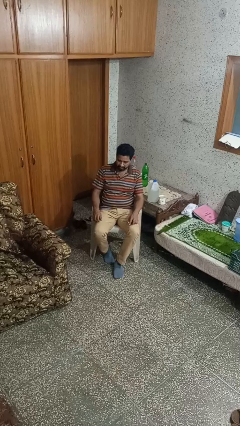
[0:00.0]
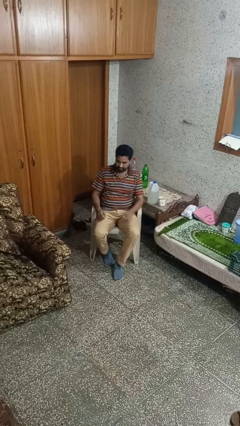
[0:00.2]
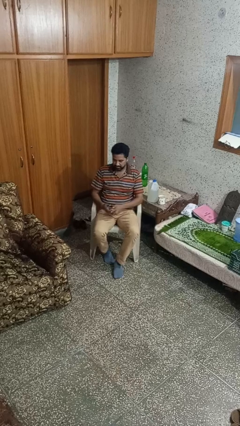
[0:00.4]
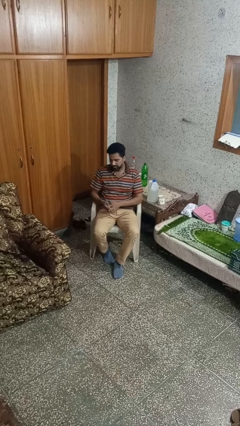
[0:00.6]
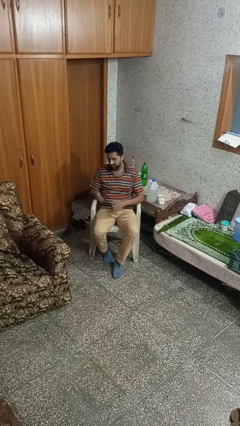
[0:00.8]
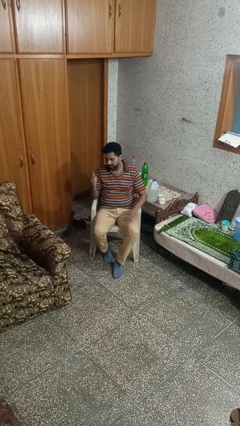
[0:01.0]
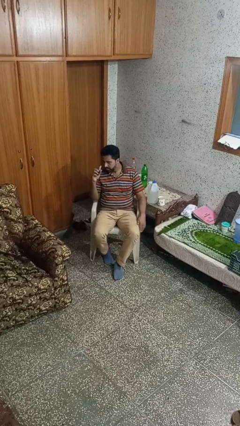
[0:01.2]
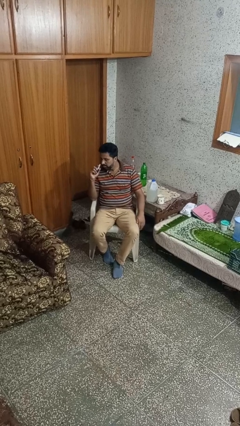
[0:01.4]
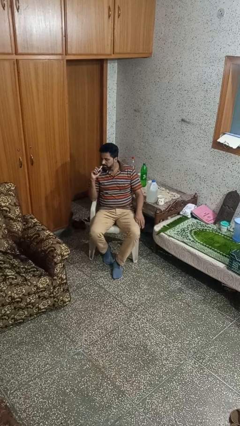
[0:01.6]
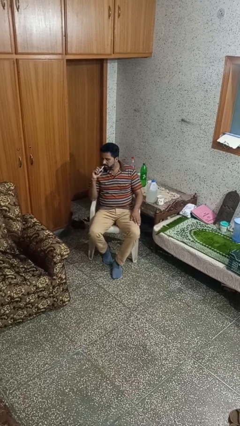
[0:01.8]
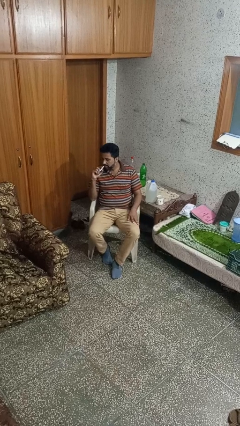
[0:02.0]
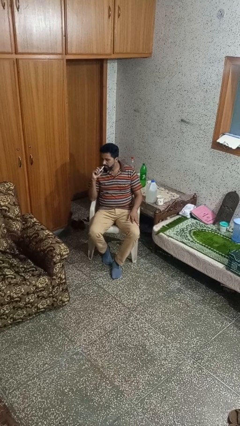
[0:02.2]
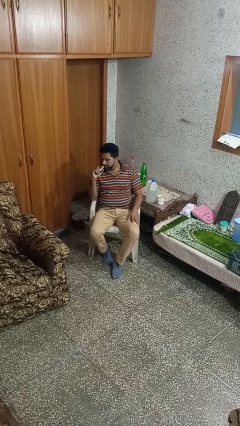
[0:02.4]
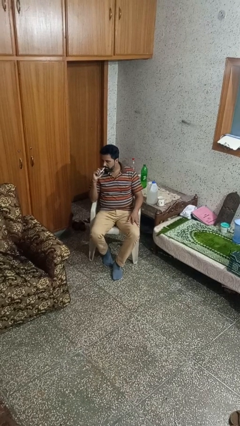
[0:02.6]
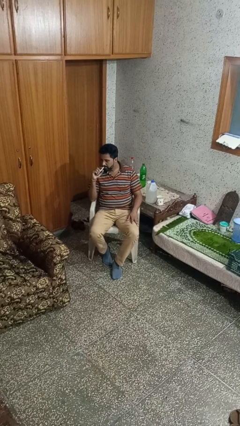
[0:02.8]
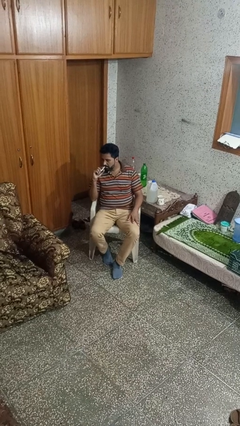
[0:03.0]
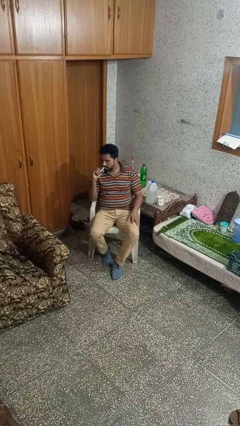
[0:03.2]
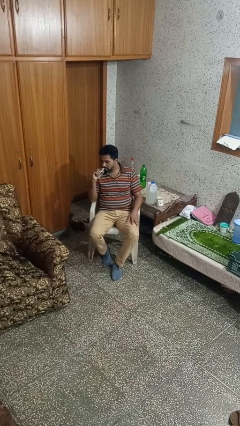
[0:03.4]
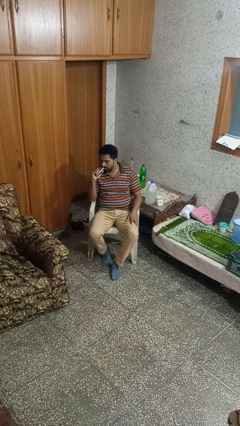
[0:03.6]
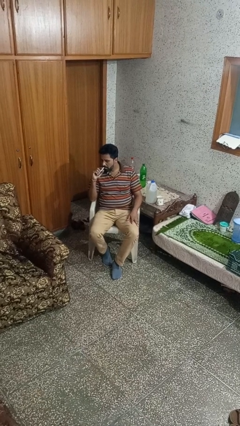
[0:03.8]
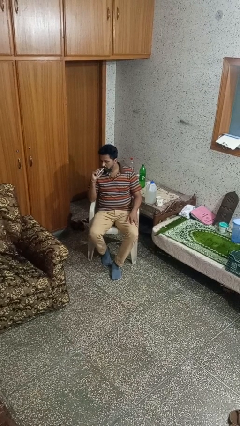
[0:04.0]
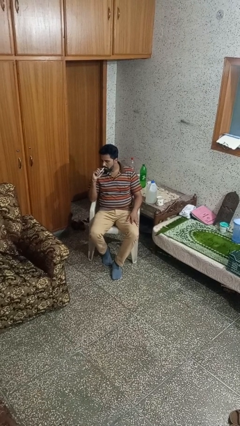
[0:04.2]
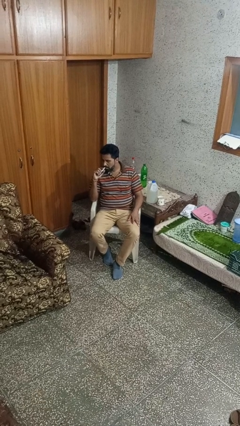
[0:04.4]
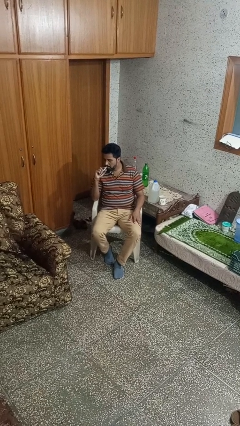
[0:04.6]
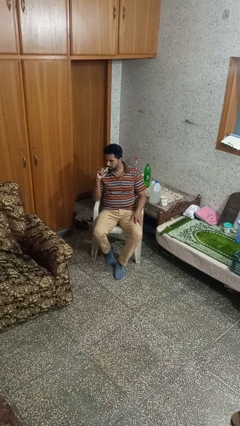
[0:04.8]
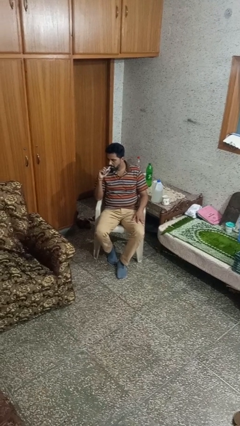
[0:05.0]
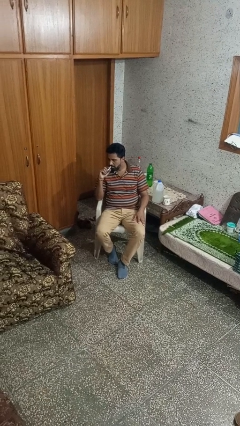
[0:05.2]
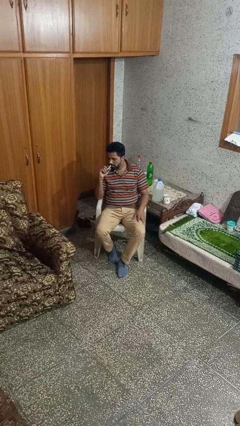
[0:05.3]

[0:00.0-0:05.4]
person vapes

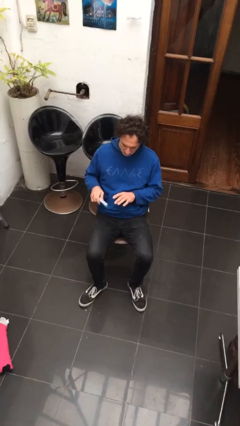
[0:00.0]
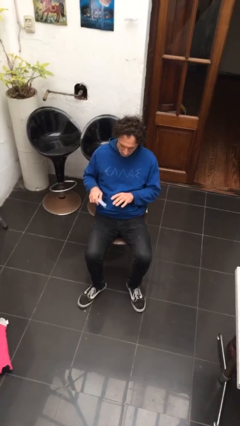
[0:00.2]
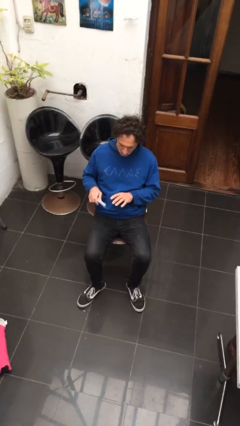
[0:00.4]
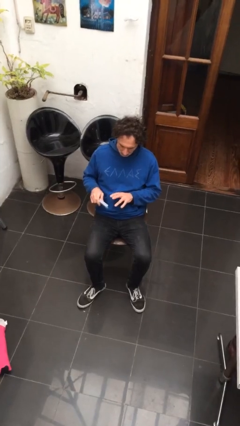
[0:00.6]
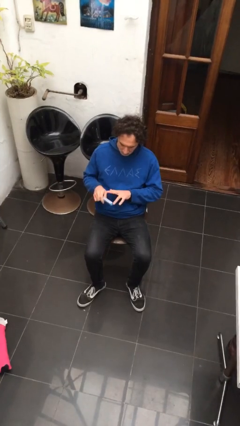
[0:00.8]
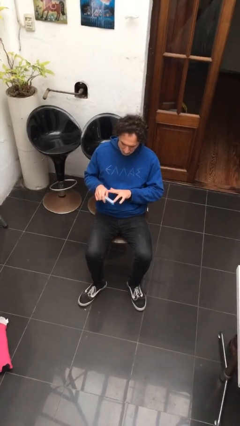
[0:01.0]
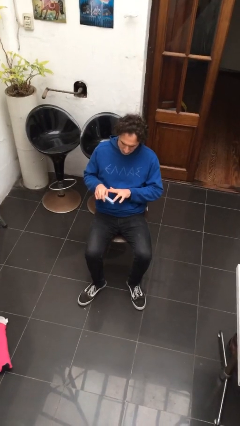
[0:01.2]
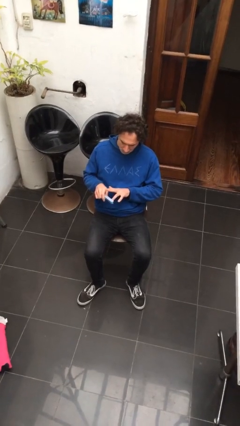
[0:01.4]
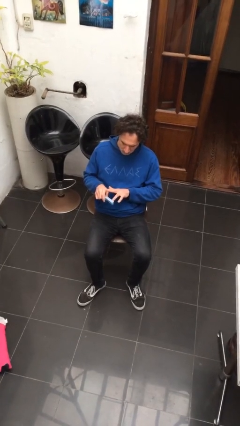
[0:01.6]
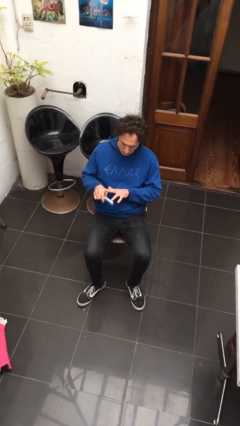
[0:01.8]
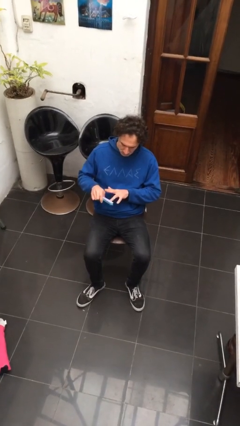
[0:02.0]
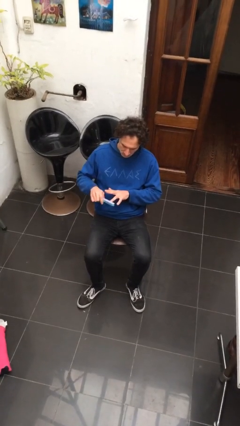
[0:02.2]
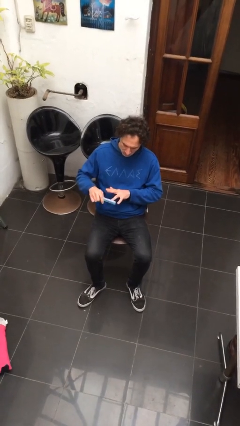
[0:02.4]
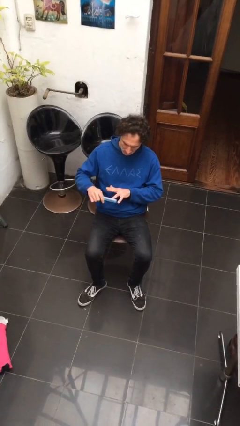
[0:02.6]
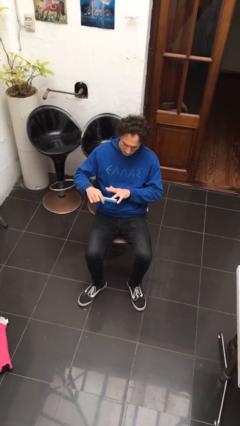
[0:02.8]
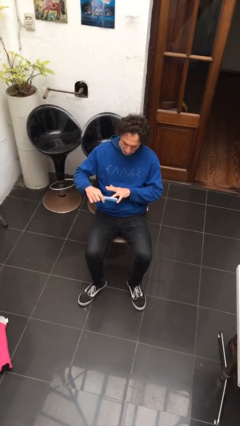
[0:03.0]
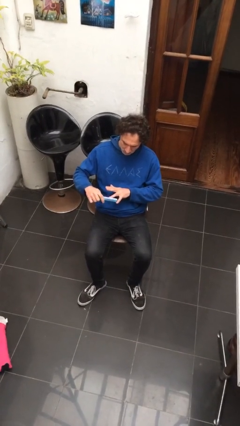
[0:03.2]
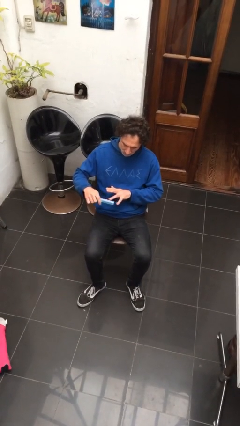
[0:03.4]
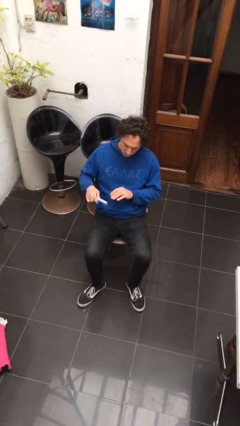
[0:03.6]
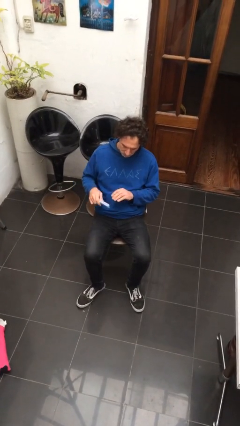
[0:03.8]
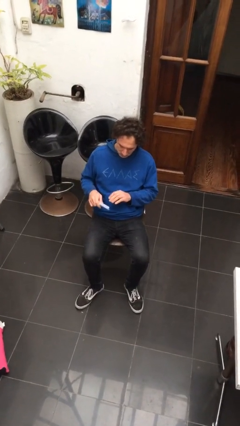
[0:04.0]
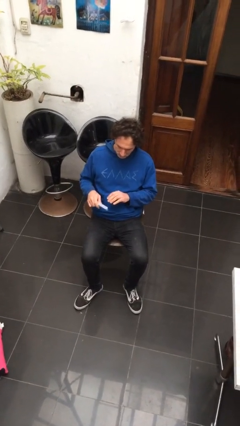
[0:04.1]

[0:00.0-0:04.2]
person files fingernails

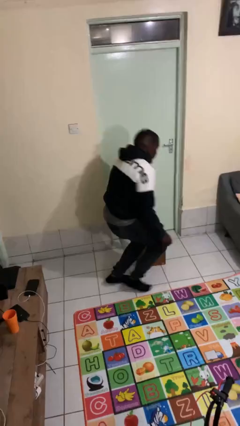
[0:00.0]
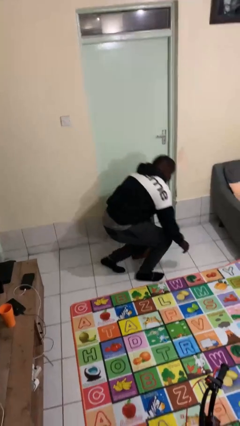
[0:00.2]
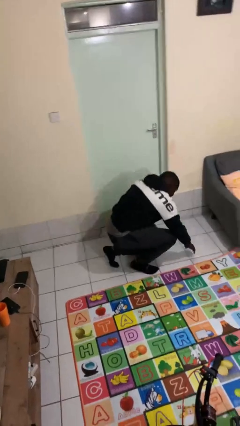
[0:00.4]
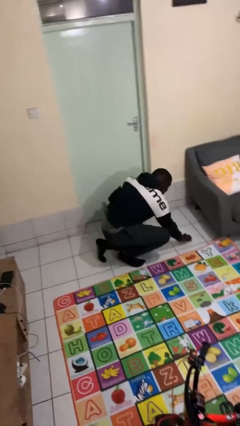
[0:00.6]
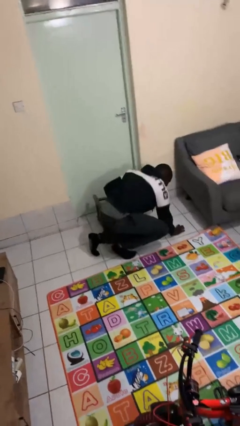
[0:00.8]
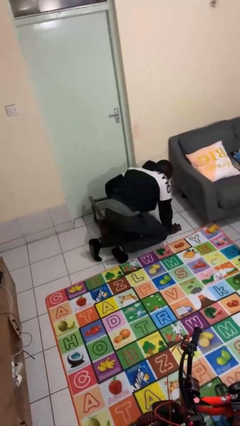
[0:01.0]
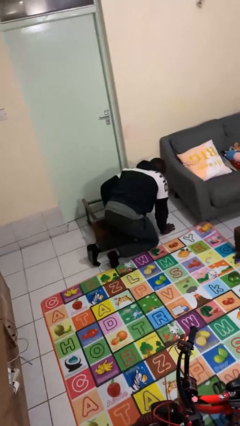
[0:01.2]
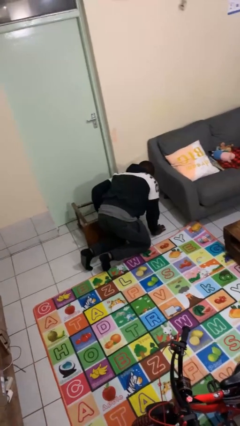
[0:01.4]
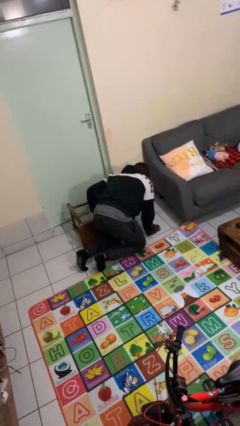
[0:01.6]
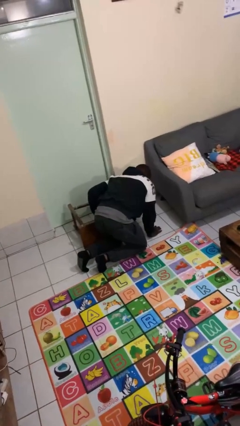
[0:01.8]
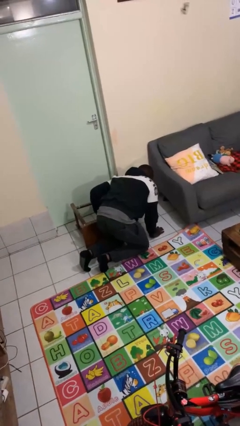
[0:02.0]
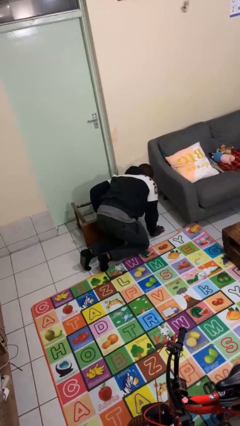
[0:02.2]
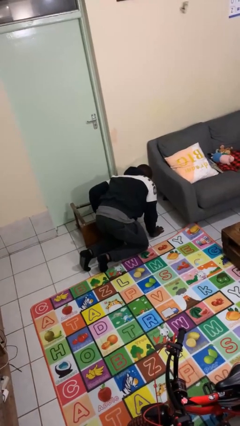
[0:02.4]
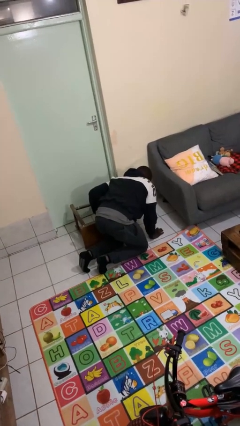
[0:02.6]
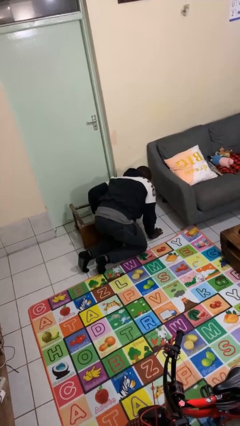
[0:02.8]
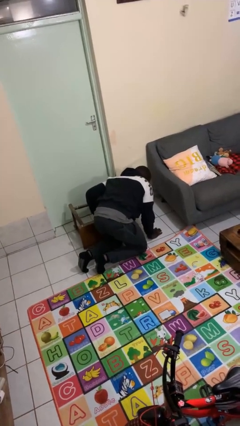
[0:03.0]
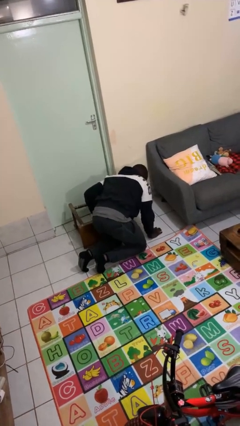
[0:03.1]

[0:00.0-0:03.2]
person trips on object on floor

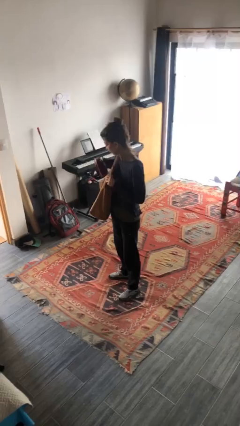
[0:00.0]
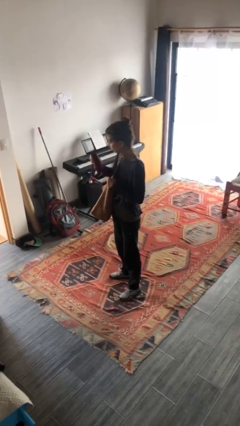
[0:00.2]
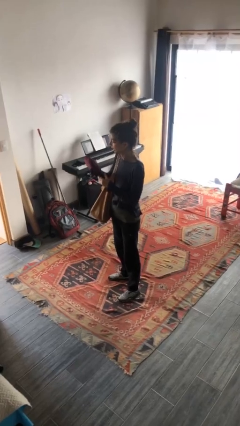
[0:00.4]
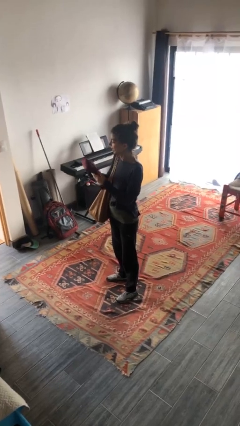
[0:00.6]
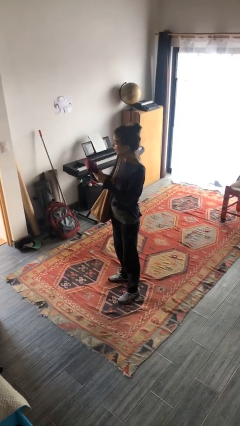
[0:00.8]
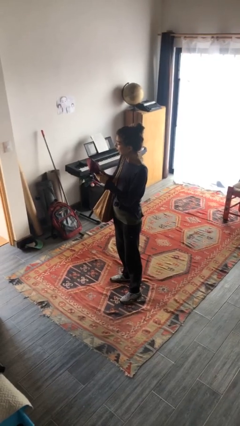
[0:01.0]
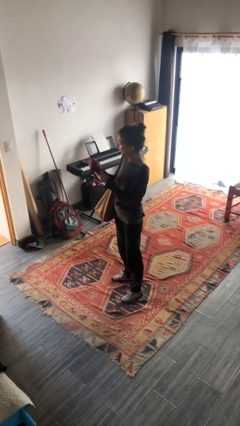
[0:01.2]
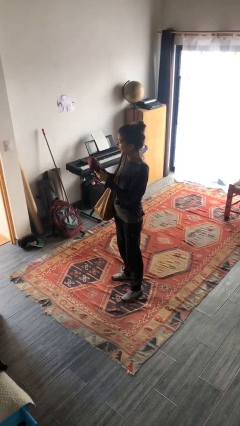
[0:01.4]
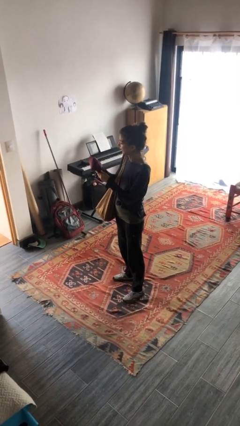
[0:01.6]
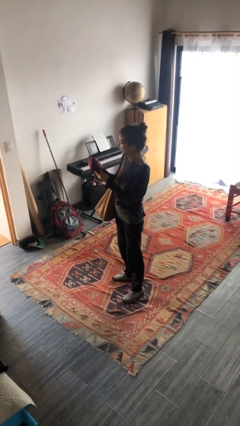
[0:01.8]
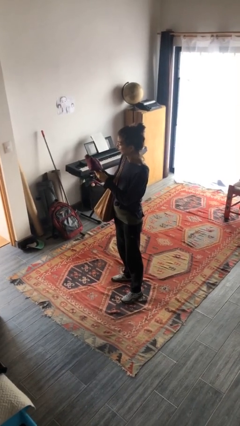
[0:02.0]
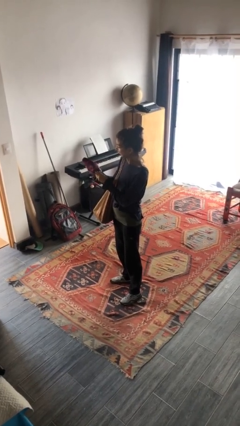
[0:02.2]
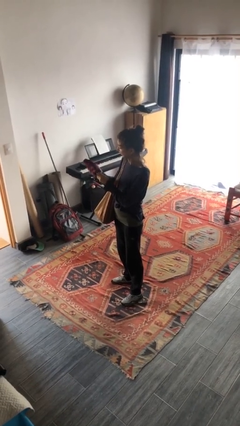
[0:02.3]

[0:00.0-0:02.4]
person takes object from purse

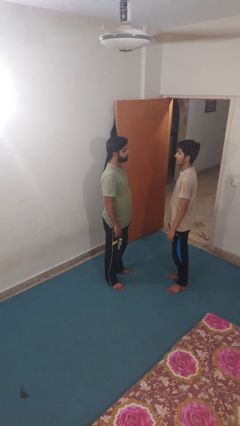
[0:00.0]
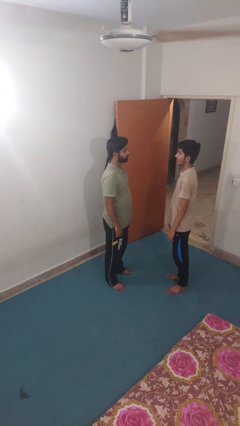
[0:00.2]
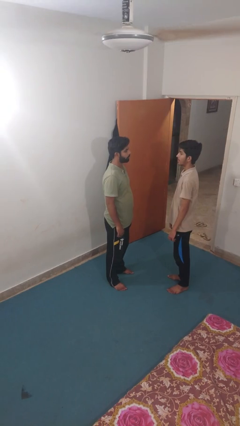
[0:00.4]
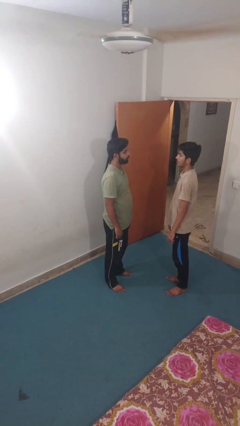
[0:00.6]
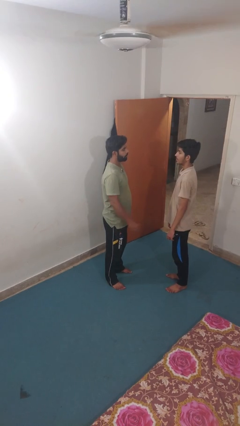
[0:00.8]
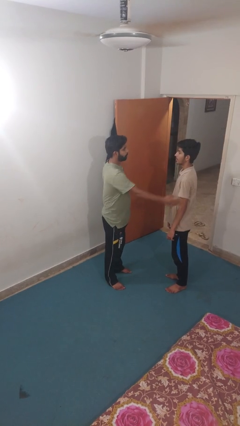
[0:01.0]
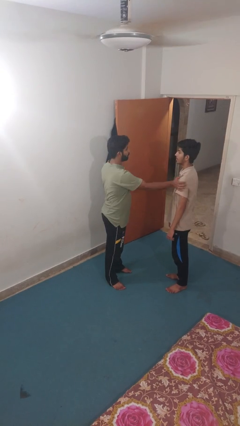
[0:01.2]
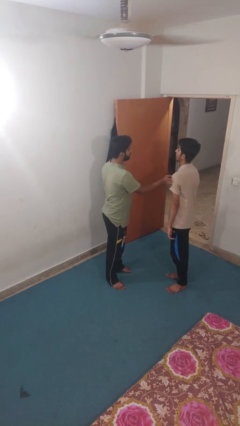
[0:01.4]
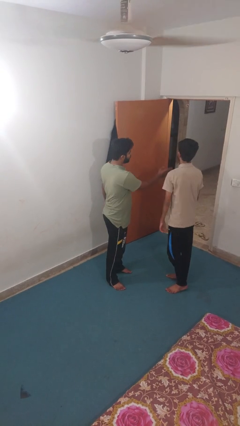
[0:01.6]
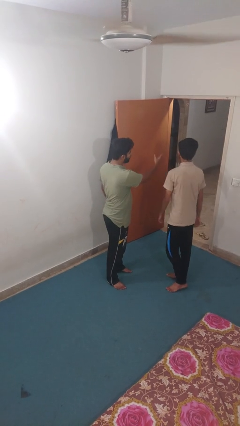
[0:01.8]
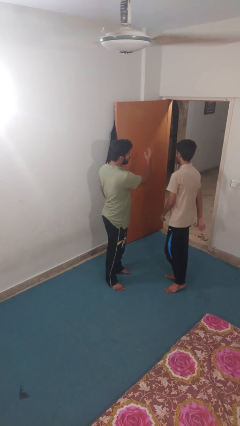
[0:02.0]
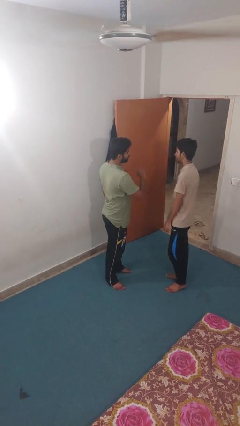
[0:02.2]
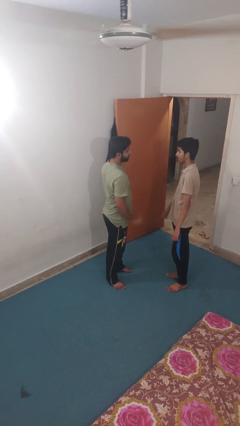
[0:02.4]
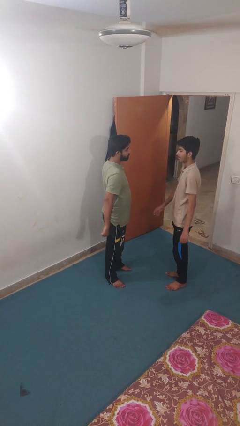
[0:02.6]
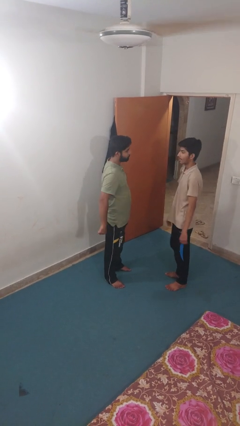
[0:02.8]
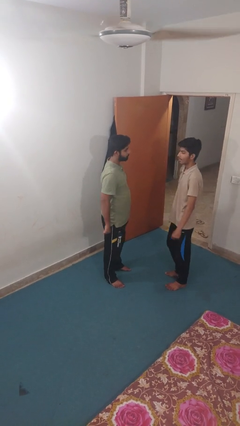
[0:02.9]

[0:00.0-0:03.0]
person shoves person
